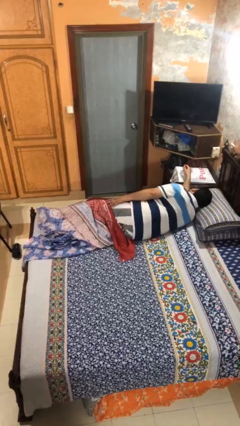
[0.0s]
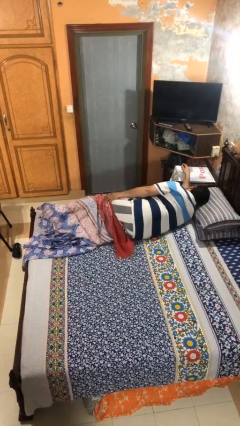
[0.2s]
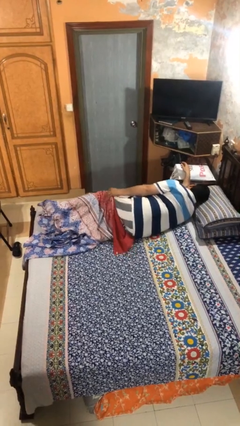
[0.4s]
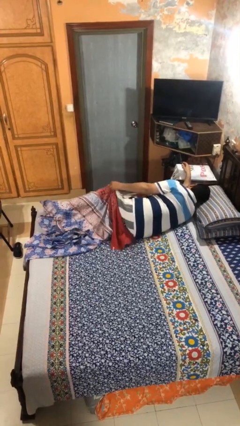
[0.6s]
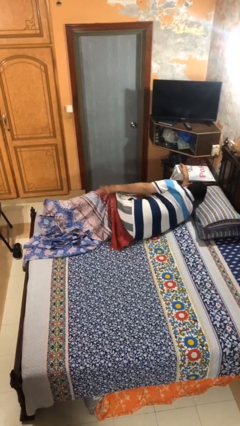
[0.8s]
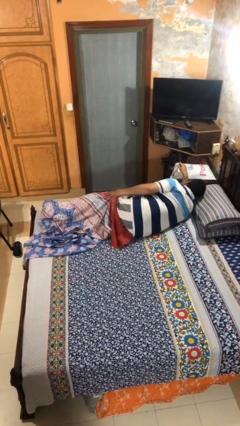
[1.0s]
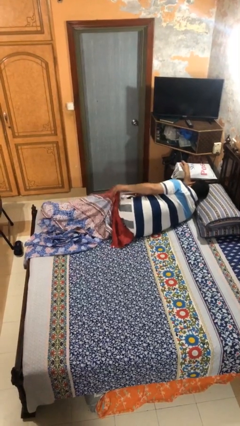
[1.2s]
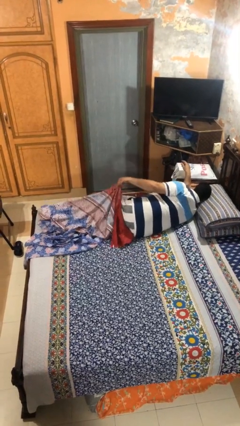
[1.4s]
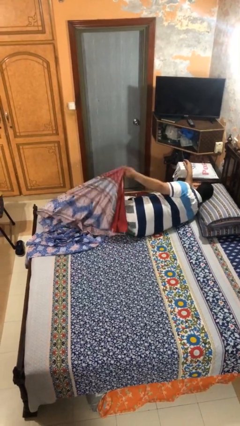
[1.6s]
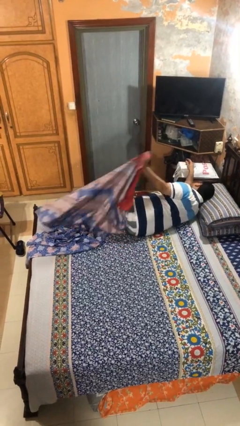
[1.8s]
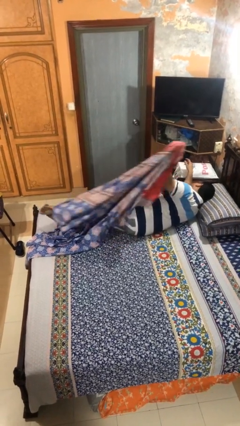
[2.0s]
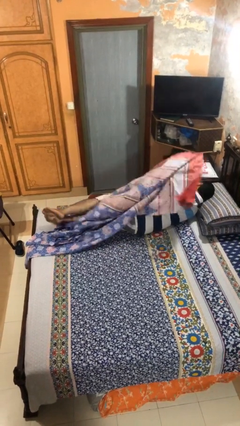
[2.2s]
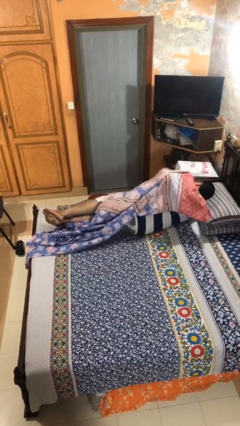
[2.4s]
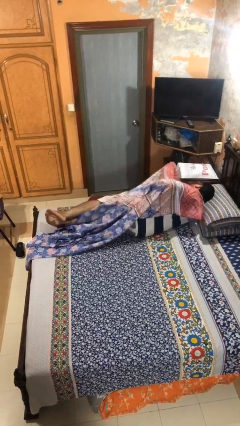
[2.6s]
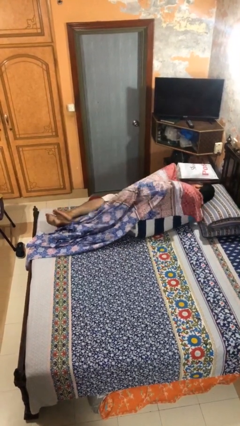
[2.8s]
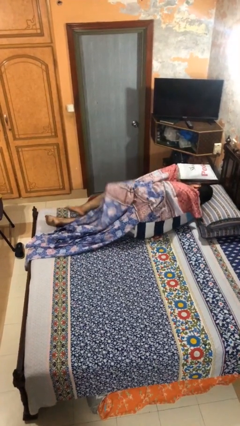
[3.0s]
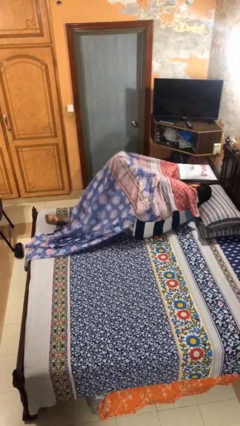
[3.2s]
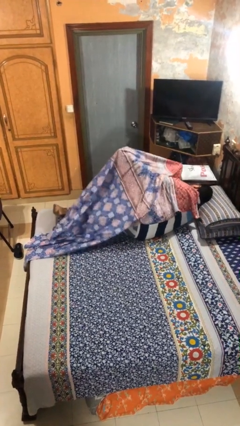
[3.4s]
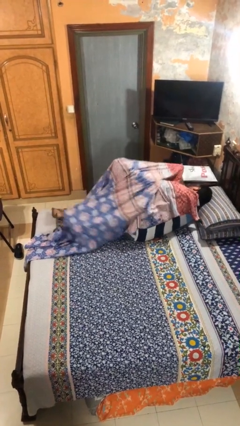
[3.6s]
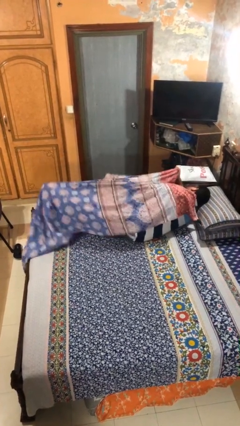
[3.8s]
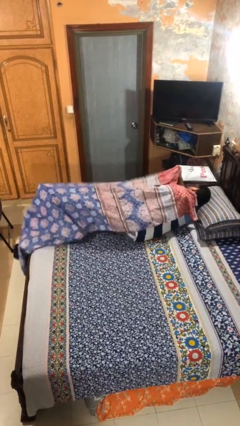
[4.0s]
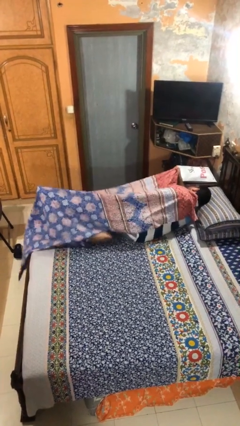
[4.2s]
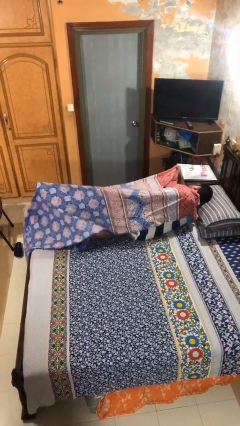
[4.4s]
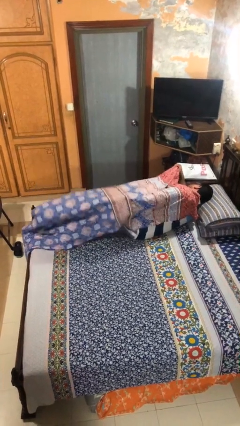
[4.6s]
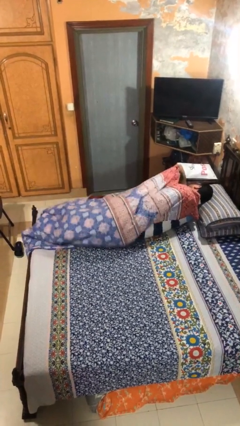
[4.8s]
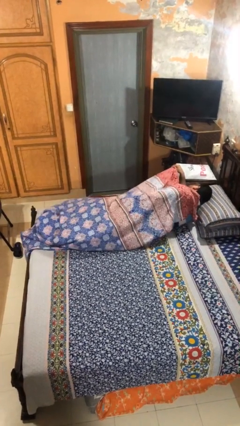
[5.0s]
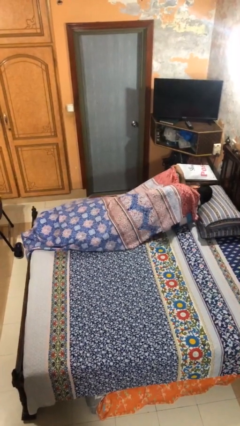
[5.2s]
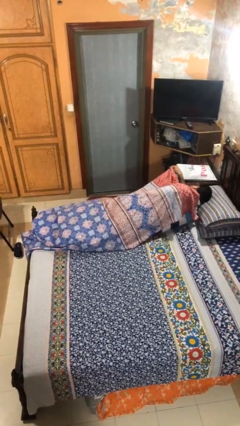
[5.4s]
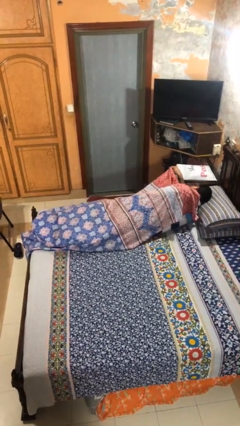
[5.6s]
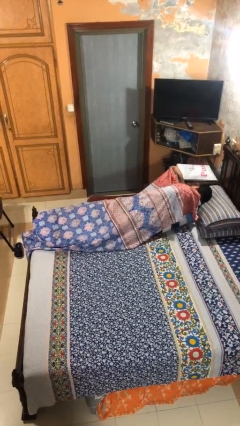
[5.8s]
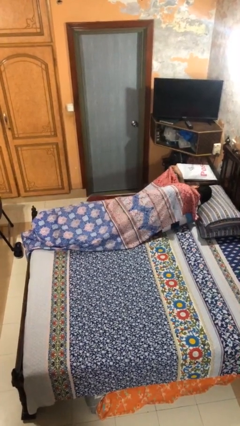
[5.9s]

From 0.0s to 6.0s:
person covers with bedsheets

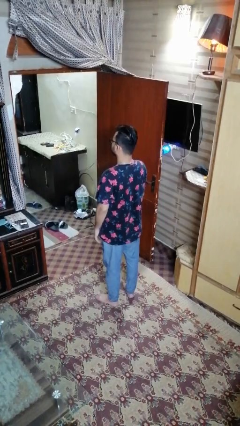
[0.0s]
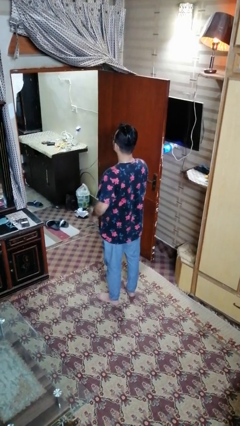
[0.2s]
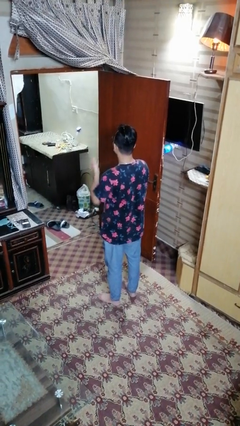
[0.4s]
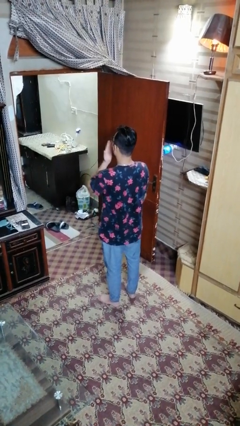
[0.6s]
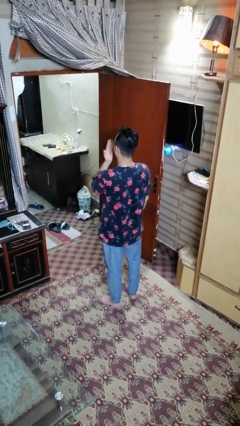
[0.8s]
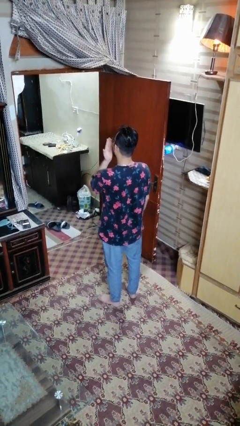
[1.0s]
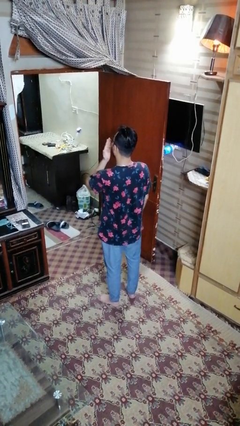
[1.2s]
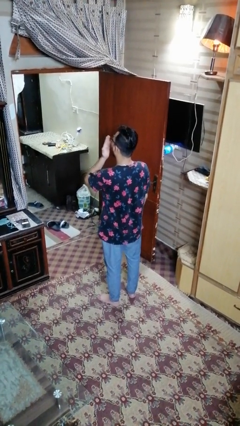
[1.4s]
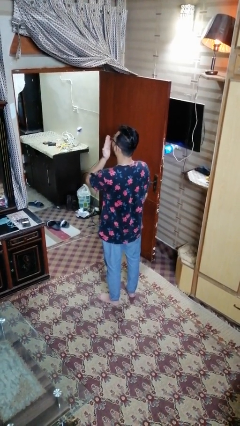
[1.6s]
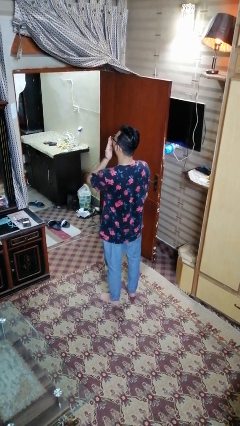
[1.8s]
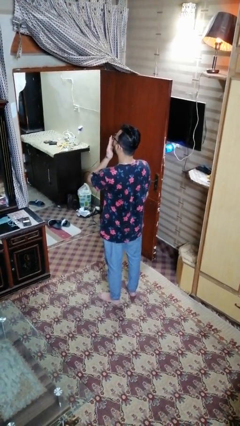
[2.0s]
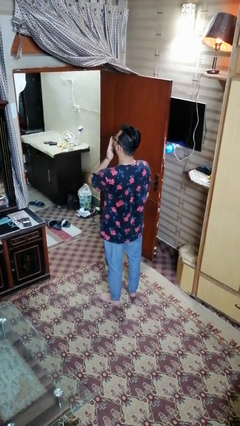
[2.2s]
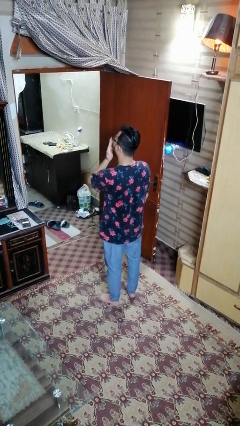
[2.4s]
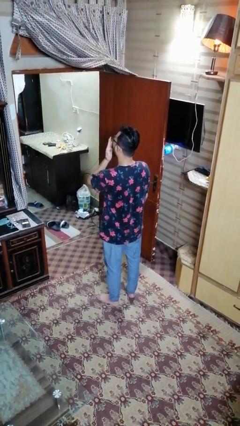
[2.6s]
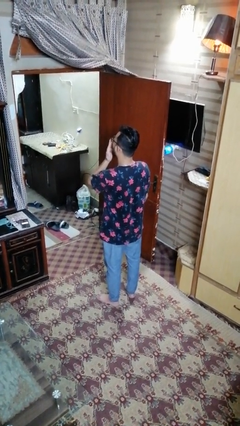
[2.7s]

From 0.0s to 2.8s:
person yawns

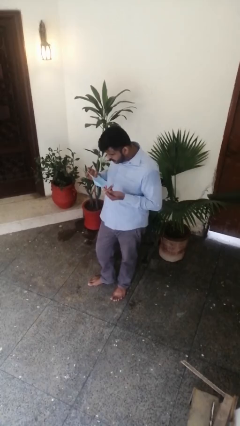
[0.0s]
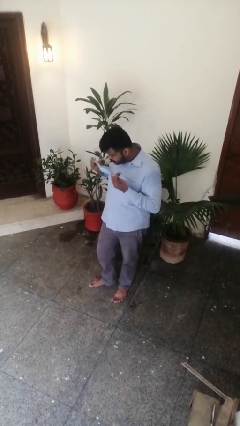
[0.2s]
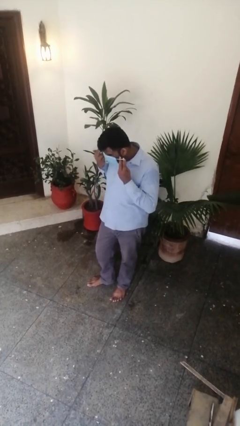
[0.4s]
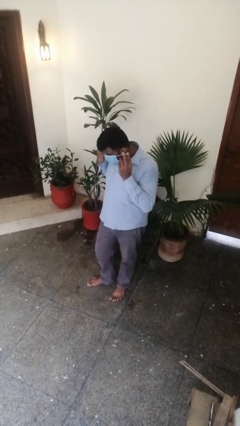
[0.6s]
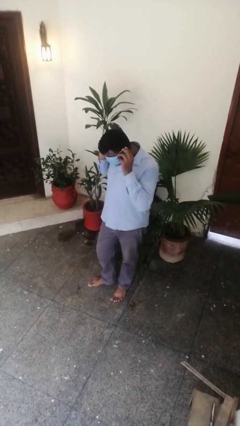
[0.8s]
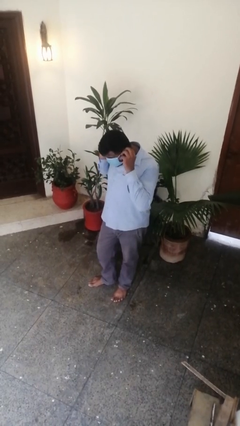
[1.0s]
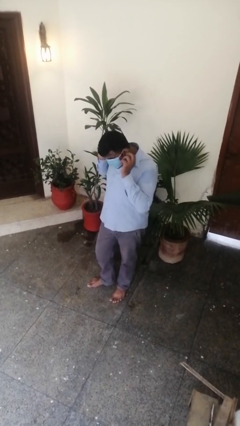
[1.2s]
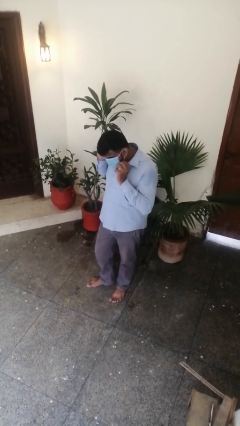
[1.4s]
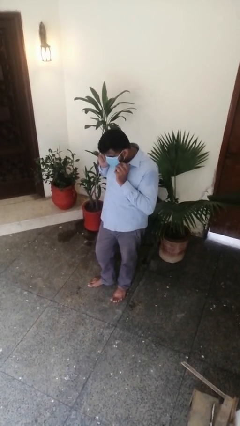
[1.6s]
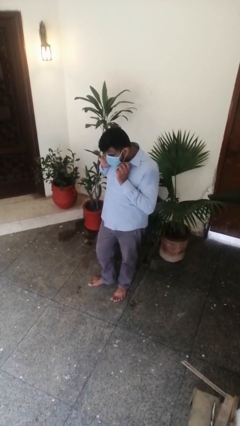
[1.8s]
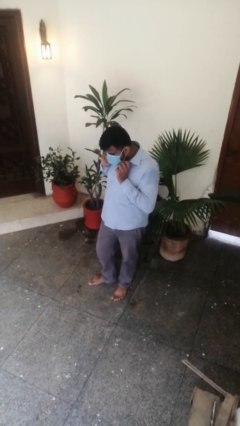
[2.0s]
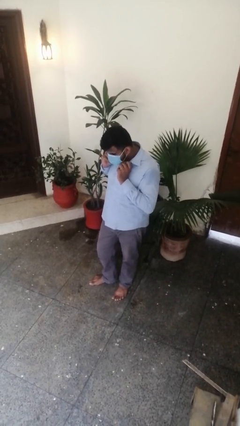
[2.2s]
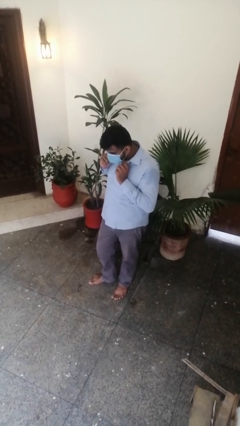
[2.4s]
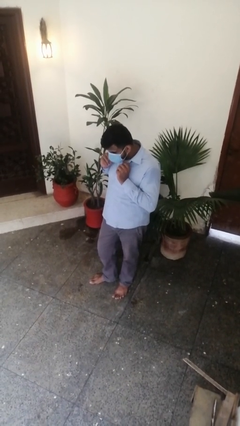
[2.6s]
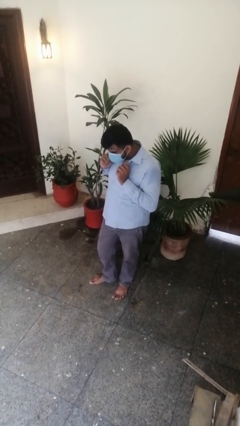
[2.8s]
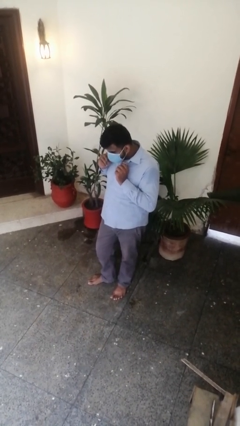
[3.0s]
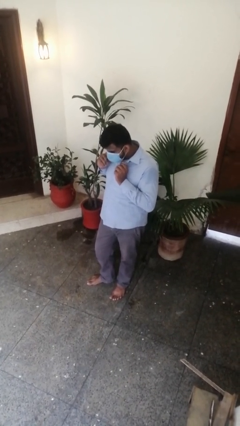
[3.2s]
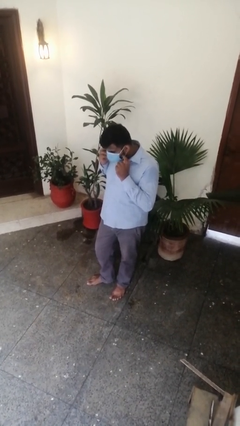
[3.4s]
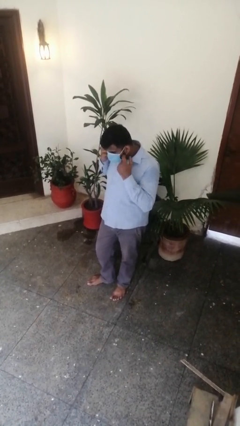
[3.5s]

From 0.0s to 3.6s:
person puts on facemask

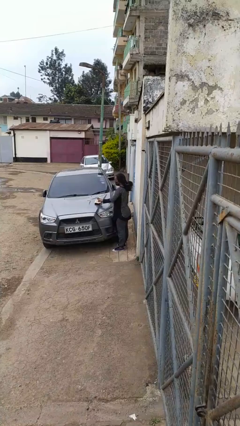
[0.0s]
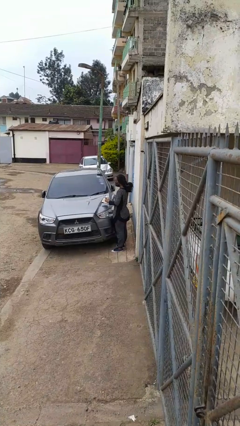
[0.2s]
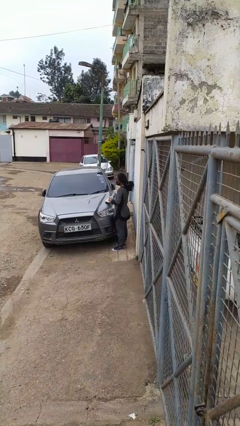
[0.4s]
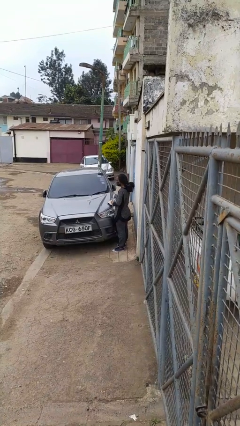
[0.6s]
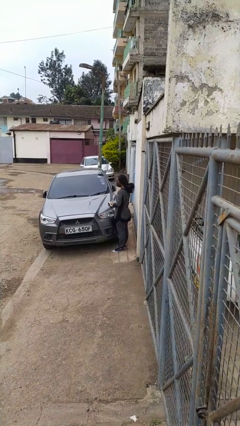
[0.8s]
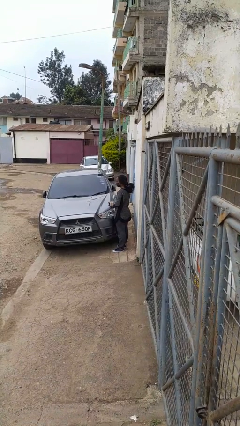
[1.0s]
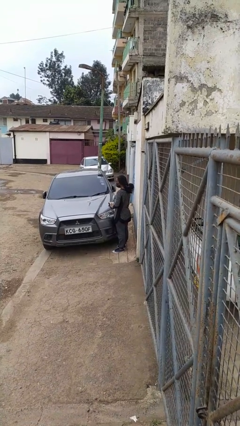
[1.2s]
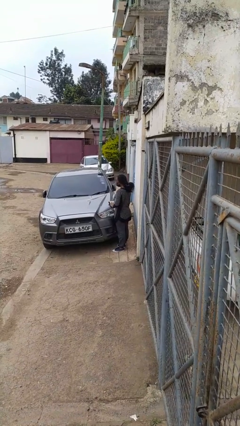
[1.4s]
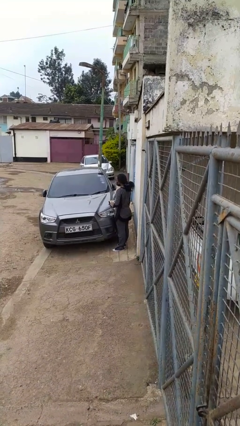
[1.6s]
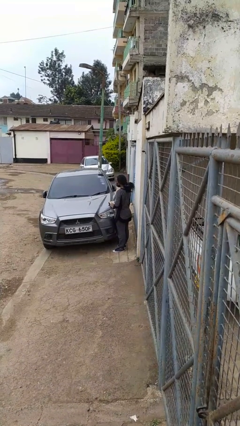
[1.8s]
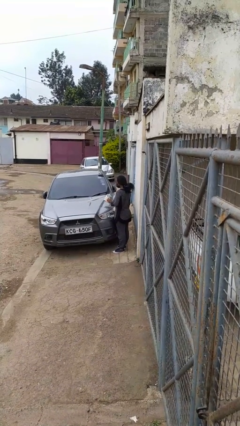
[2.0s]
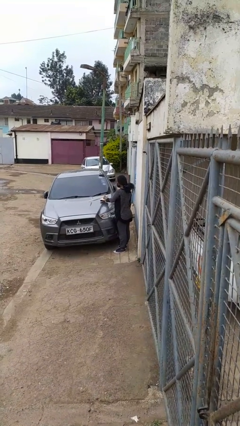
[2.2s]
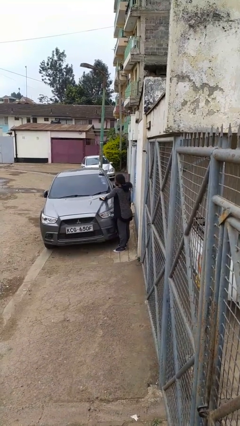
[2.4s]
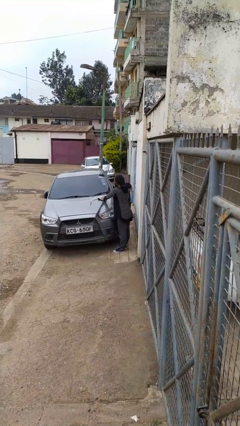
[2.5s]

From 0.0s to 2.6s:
person polishes car with rag

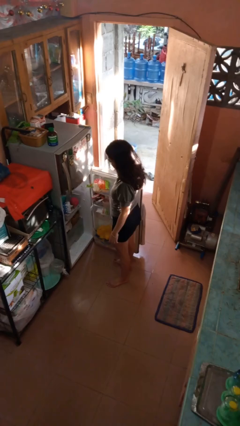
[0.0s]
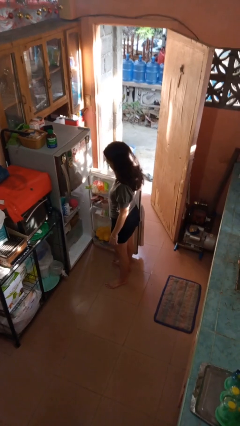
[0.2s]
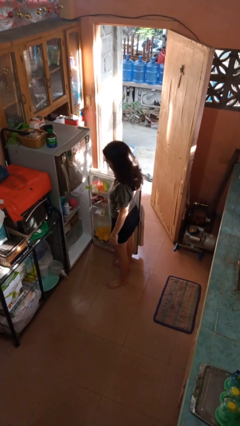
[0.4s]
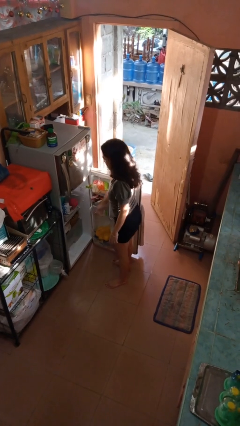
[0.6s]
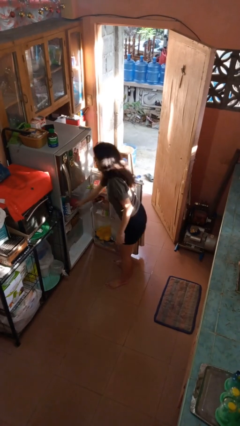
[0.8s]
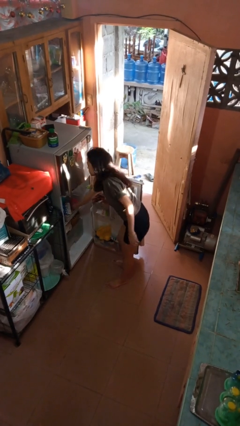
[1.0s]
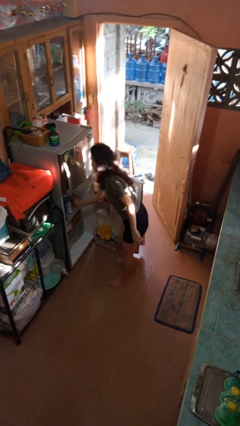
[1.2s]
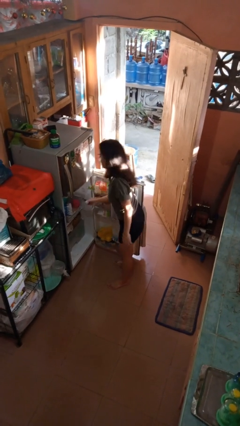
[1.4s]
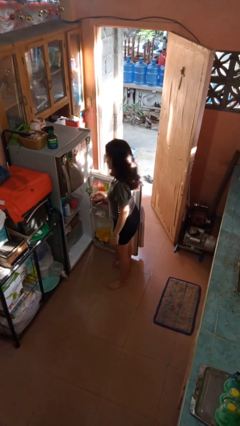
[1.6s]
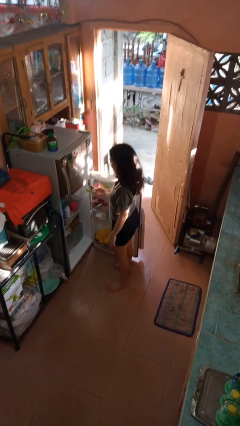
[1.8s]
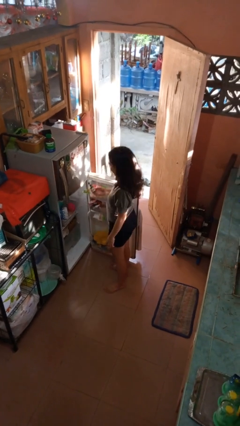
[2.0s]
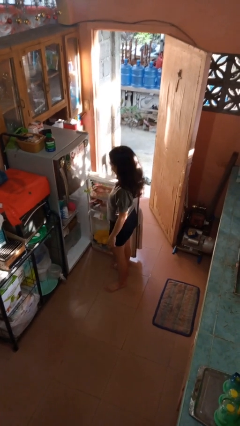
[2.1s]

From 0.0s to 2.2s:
person takes object from refrigerator

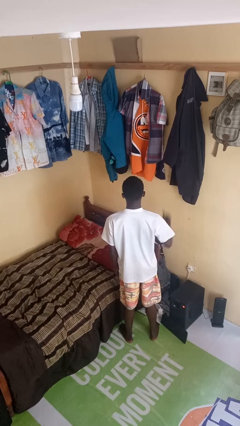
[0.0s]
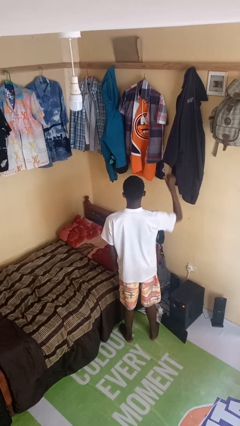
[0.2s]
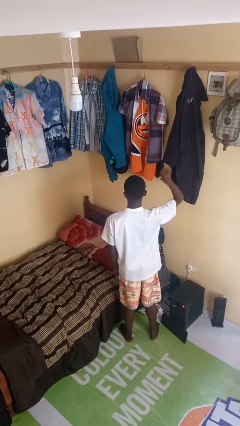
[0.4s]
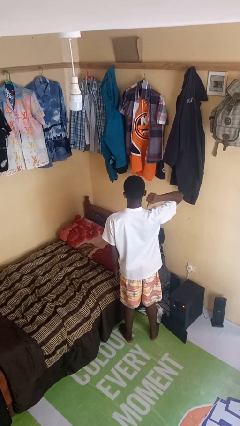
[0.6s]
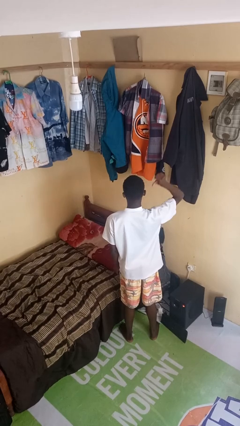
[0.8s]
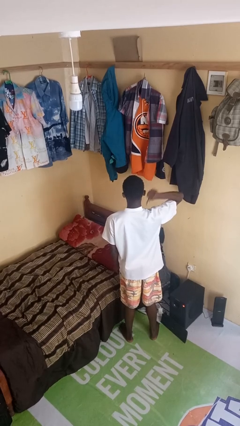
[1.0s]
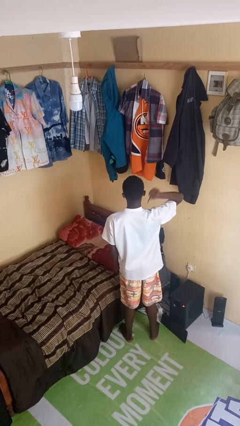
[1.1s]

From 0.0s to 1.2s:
person gestures behind me
